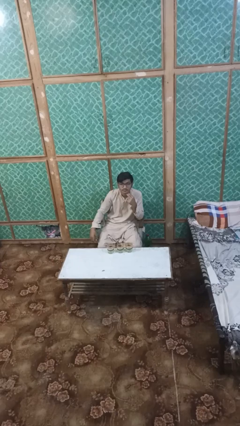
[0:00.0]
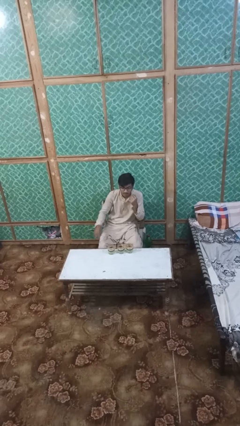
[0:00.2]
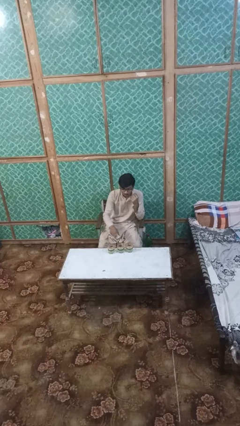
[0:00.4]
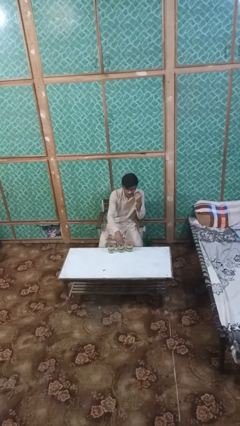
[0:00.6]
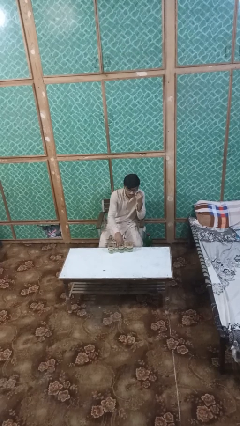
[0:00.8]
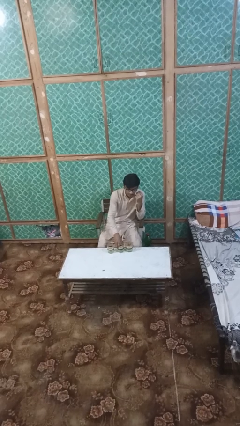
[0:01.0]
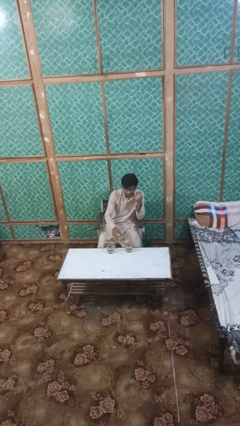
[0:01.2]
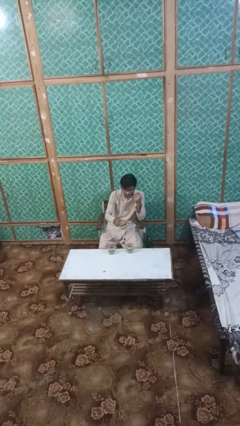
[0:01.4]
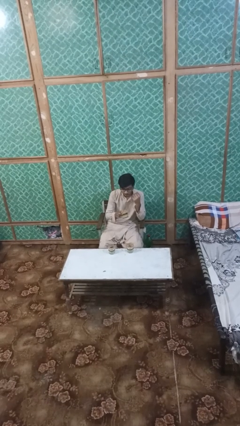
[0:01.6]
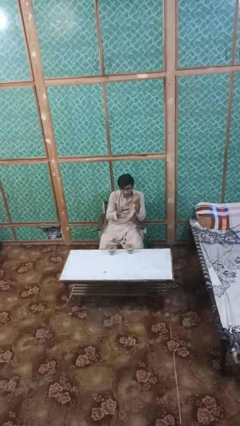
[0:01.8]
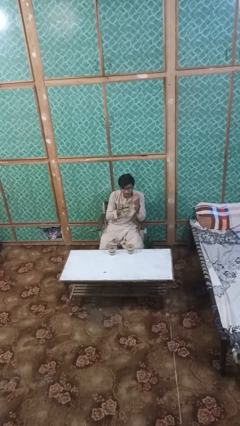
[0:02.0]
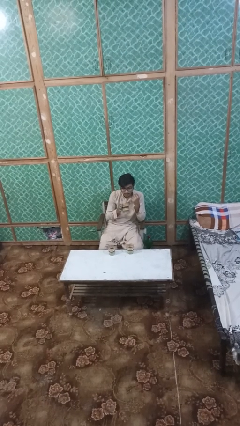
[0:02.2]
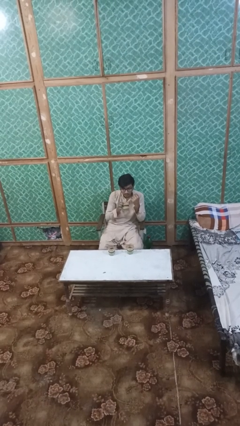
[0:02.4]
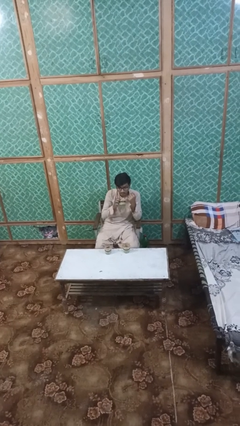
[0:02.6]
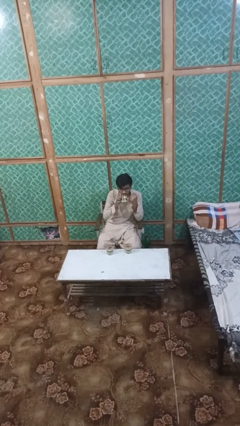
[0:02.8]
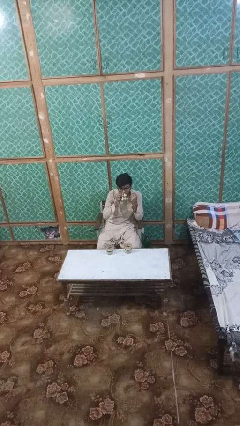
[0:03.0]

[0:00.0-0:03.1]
person picks up object from table

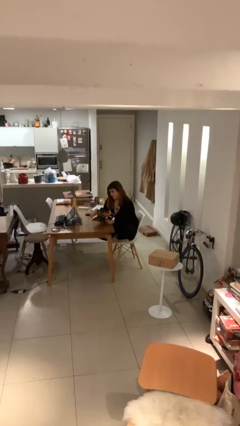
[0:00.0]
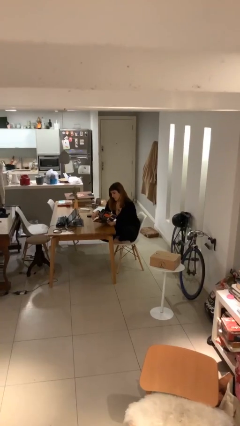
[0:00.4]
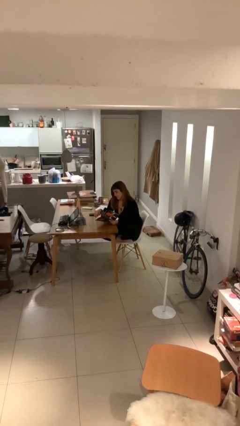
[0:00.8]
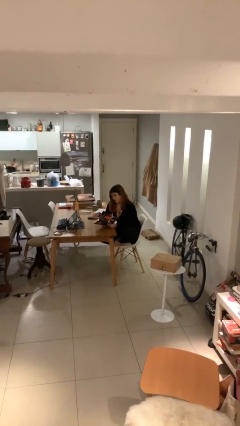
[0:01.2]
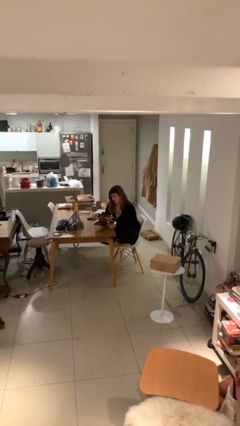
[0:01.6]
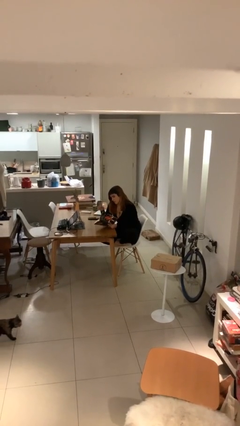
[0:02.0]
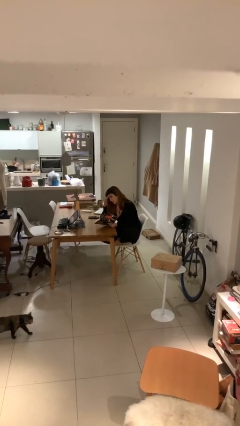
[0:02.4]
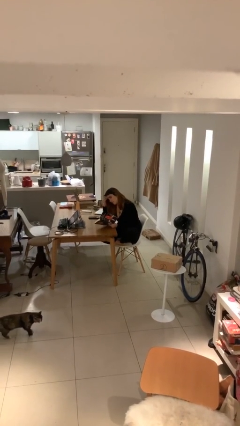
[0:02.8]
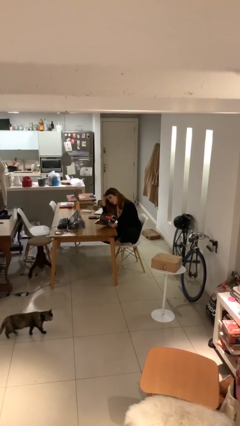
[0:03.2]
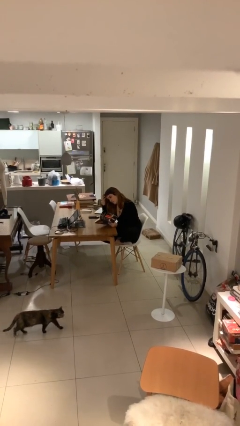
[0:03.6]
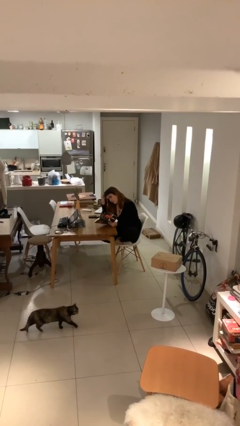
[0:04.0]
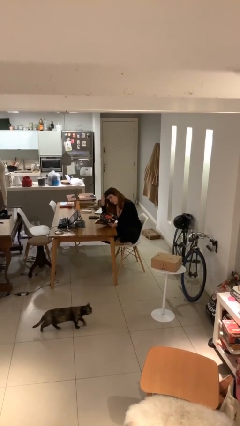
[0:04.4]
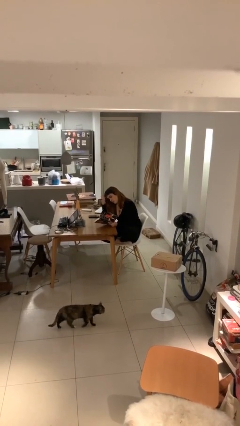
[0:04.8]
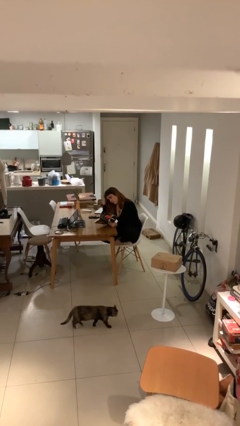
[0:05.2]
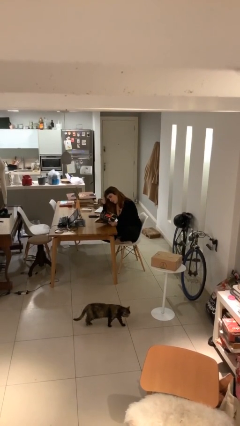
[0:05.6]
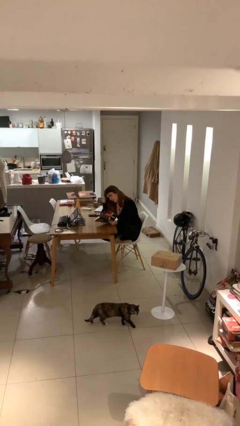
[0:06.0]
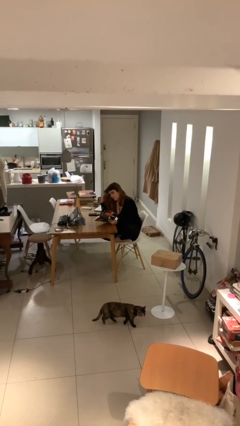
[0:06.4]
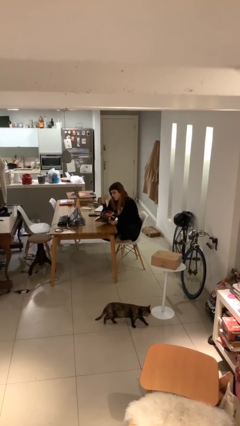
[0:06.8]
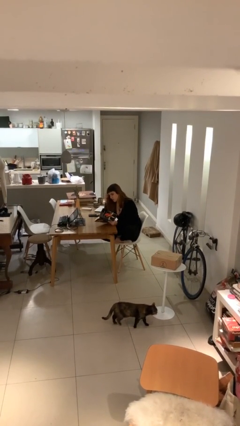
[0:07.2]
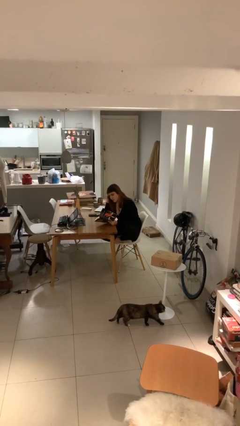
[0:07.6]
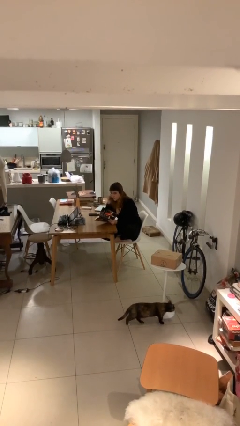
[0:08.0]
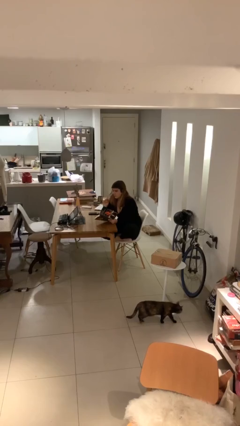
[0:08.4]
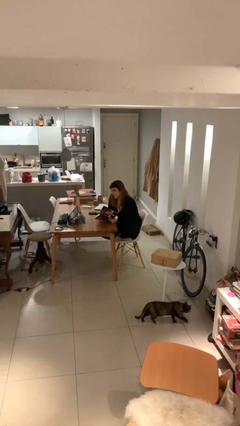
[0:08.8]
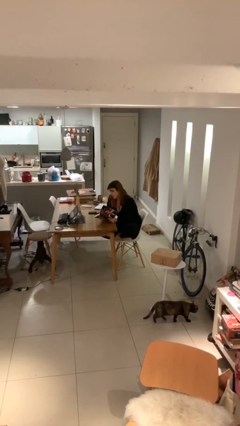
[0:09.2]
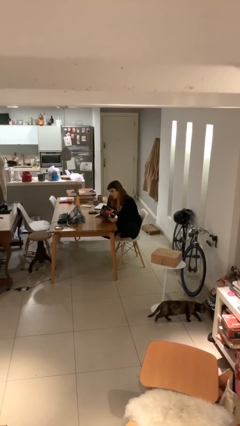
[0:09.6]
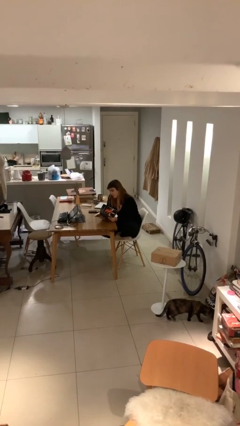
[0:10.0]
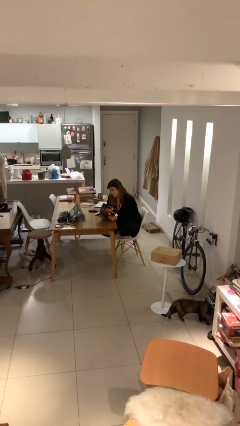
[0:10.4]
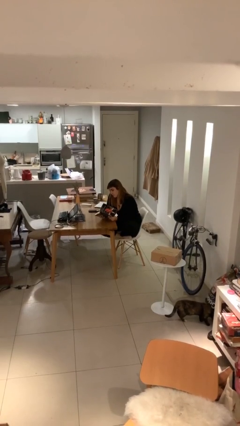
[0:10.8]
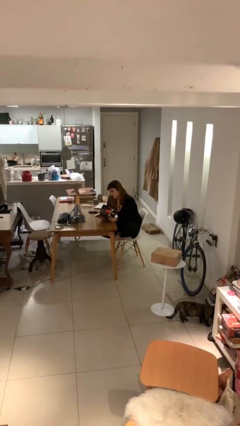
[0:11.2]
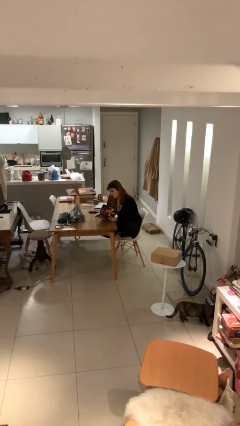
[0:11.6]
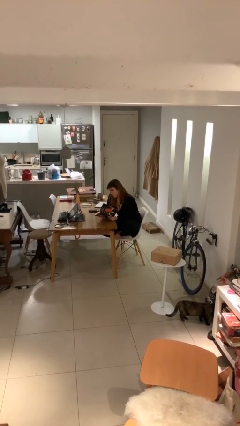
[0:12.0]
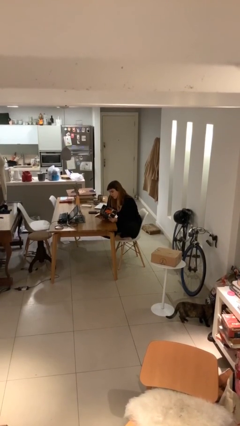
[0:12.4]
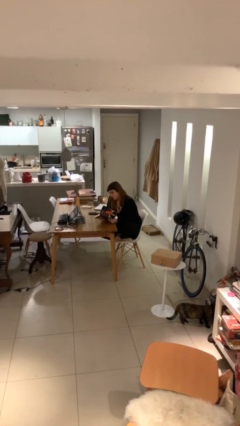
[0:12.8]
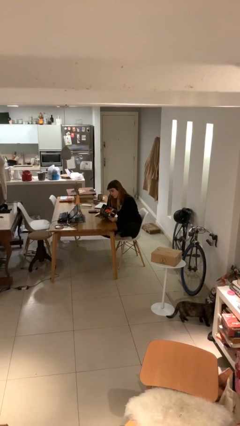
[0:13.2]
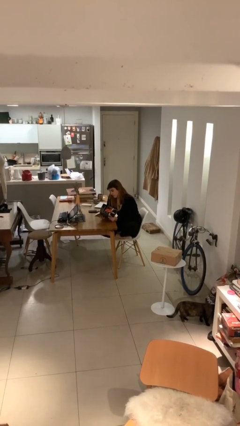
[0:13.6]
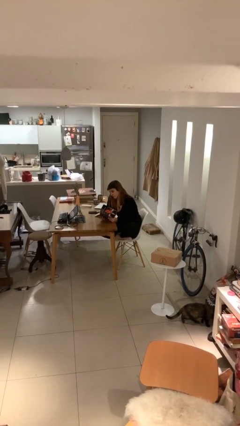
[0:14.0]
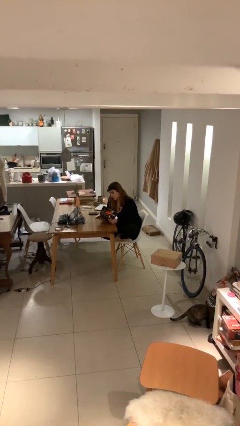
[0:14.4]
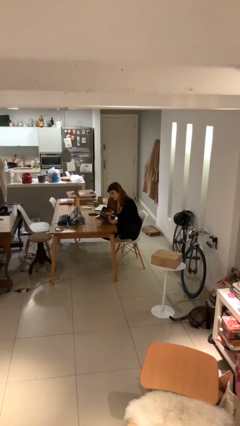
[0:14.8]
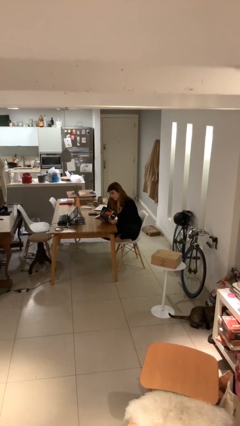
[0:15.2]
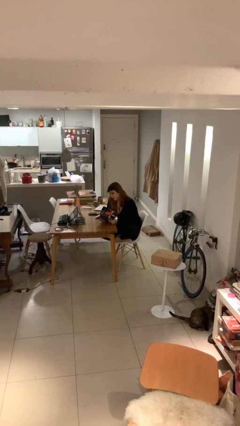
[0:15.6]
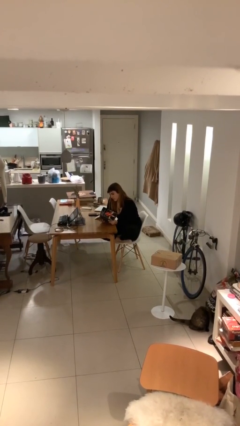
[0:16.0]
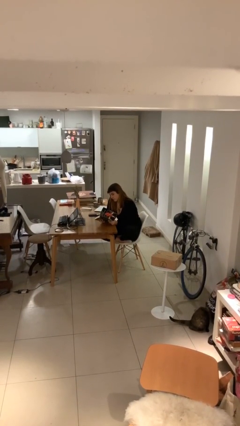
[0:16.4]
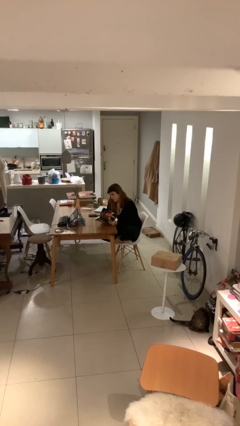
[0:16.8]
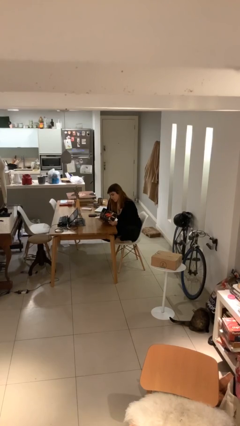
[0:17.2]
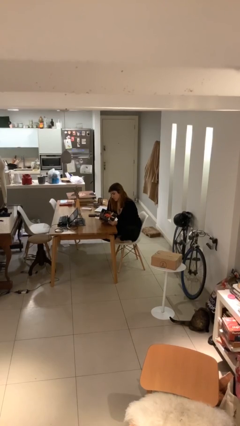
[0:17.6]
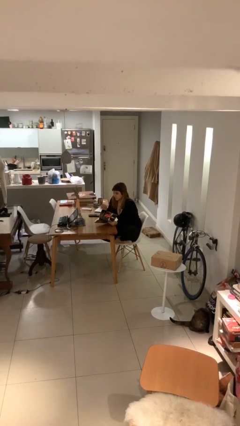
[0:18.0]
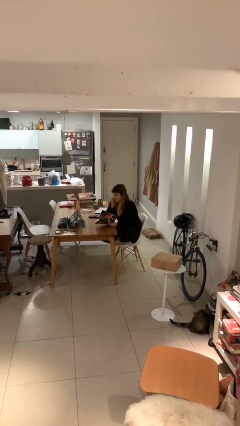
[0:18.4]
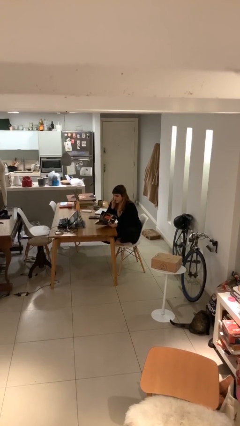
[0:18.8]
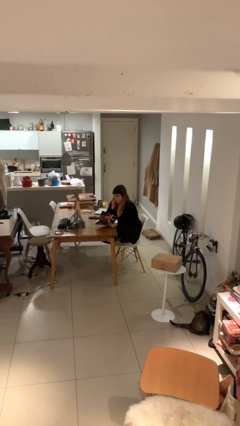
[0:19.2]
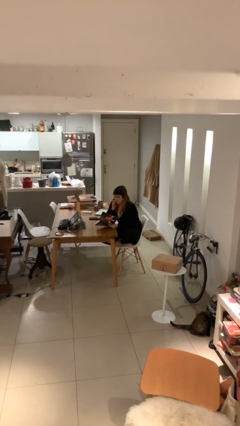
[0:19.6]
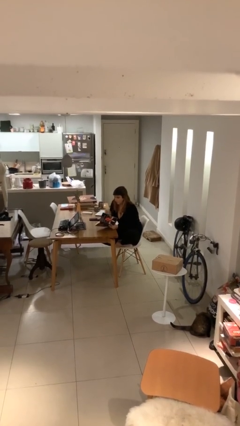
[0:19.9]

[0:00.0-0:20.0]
person reads document

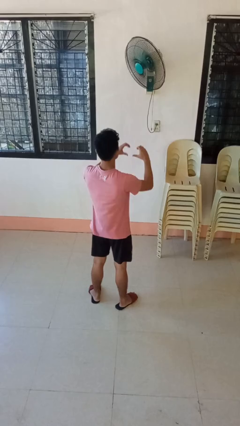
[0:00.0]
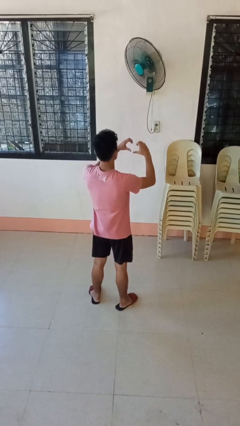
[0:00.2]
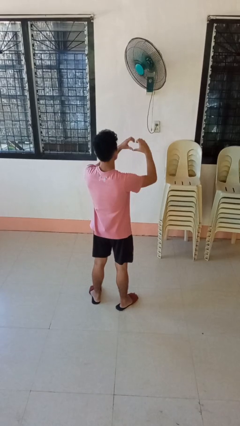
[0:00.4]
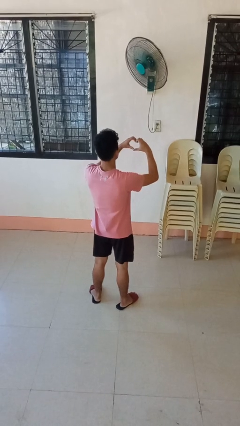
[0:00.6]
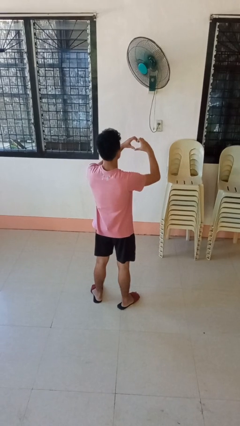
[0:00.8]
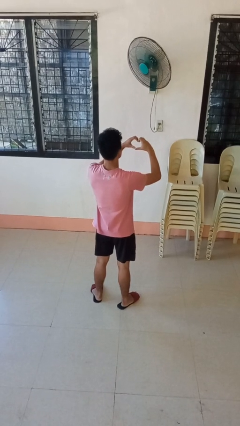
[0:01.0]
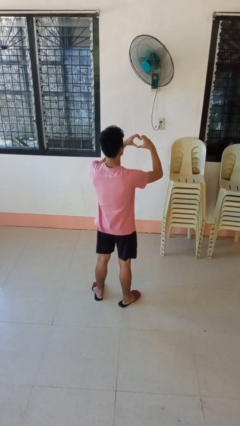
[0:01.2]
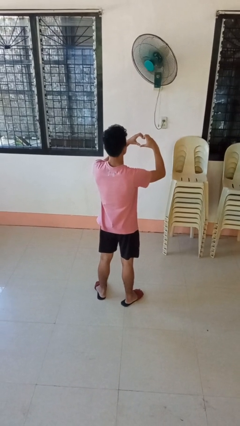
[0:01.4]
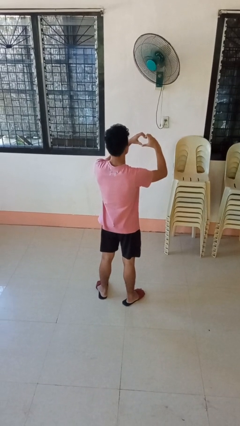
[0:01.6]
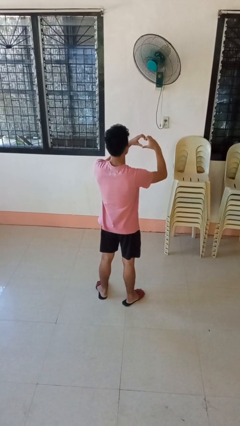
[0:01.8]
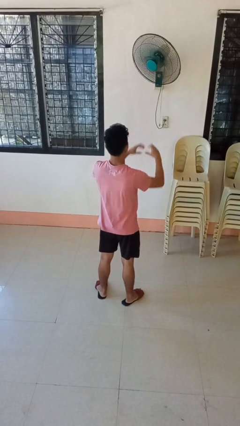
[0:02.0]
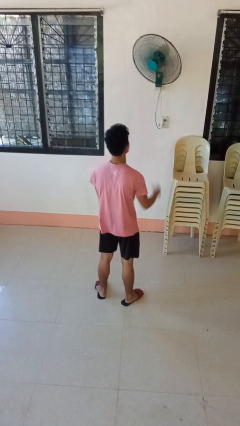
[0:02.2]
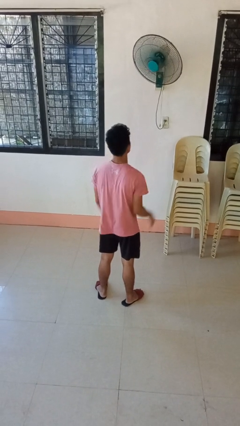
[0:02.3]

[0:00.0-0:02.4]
person gestures heart

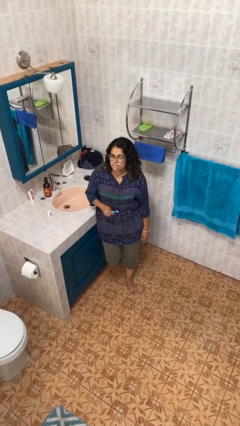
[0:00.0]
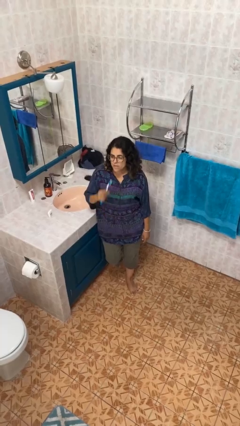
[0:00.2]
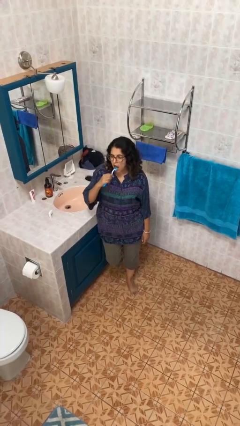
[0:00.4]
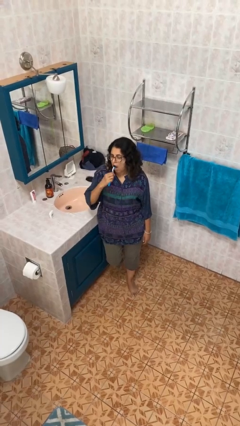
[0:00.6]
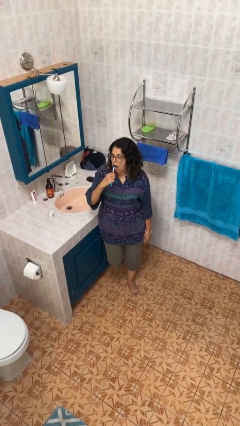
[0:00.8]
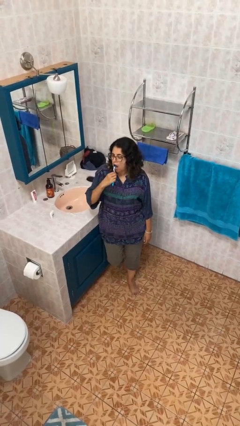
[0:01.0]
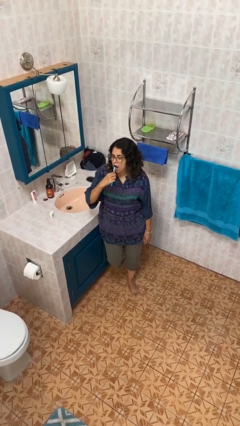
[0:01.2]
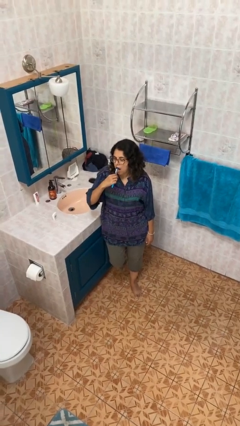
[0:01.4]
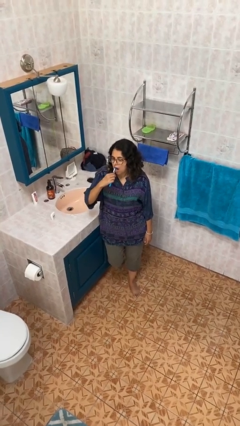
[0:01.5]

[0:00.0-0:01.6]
person brushes teeth

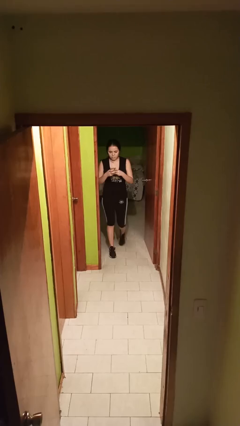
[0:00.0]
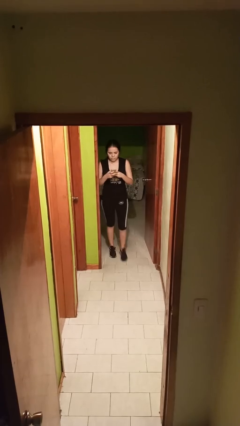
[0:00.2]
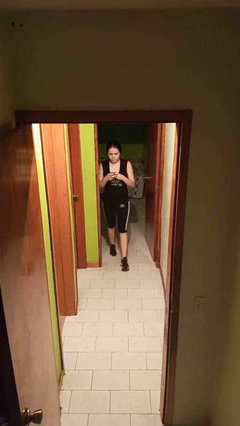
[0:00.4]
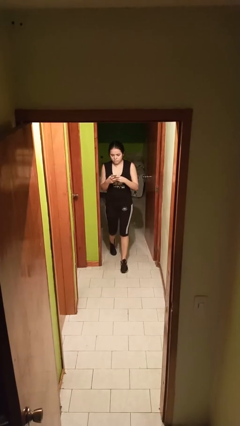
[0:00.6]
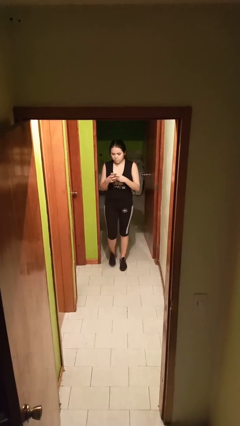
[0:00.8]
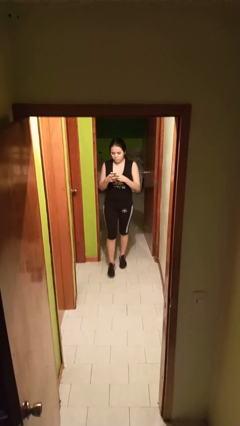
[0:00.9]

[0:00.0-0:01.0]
person enters scene through structure
